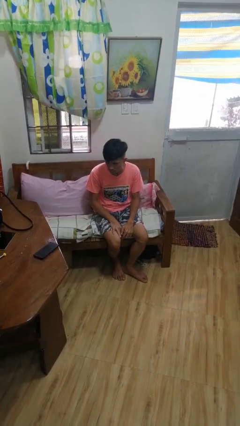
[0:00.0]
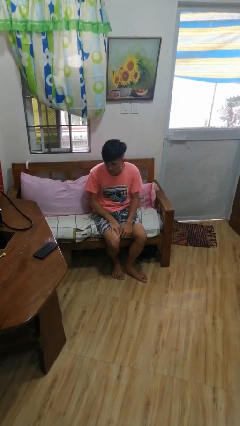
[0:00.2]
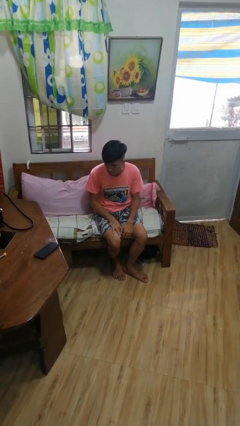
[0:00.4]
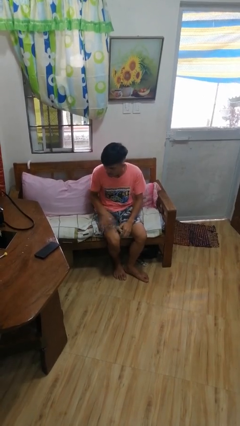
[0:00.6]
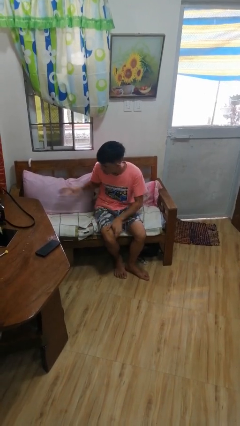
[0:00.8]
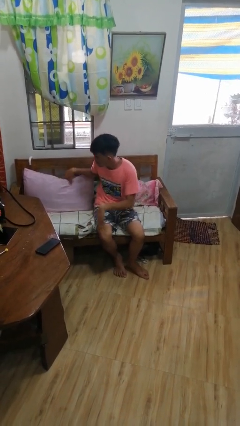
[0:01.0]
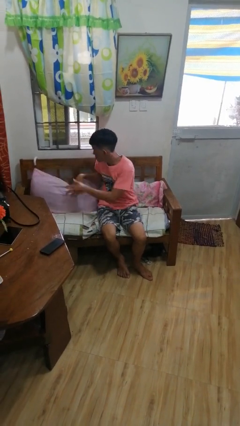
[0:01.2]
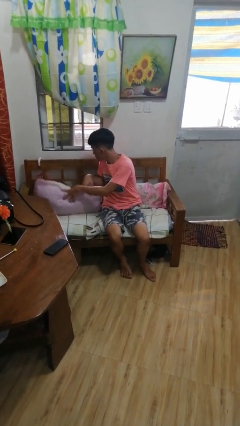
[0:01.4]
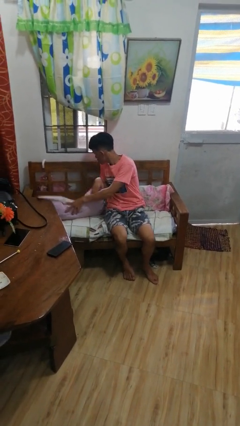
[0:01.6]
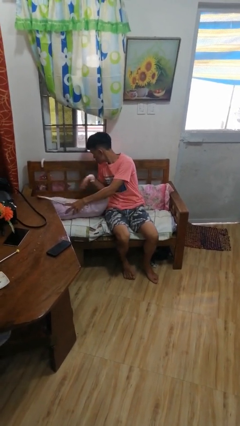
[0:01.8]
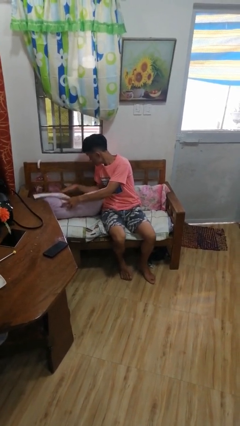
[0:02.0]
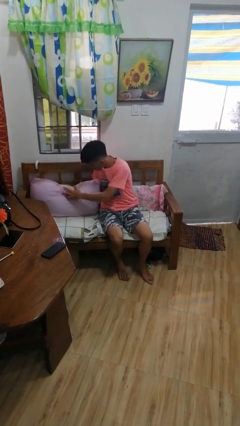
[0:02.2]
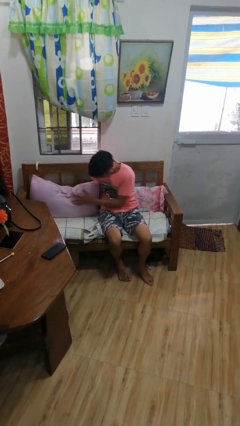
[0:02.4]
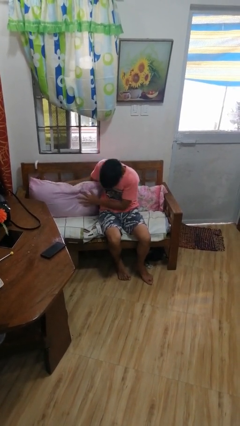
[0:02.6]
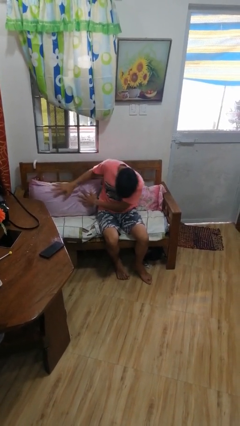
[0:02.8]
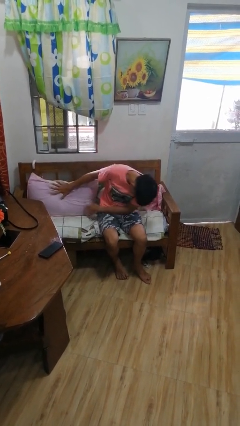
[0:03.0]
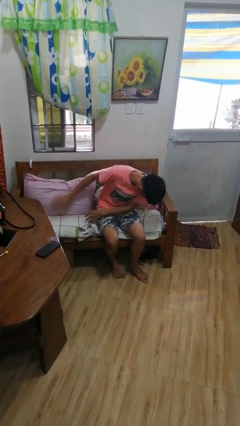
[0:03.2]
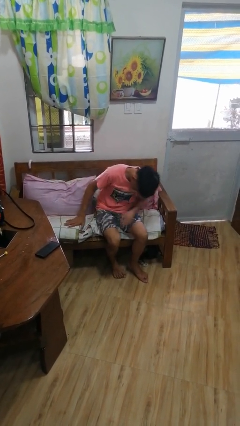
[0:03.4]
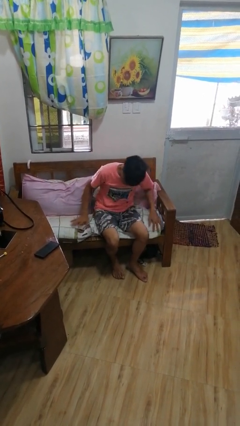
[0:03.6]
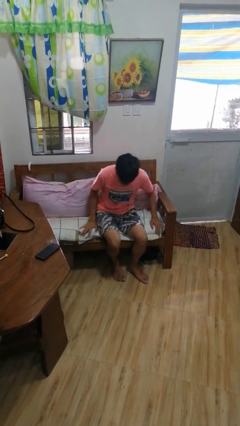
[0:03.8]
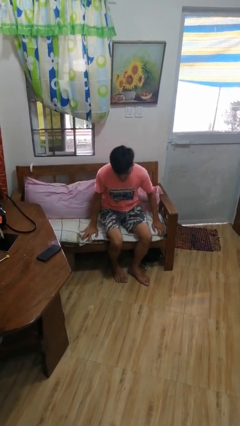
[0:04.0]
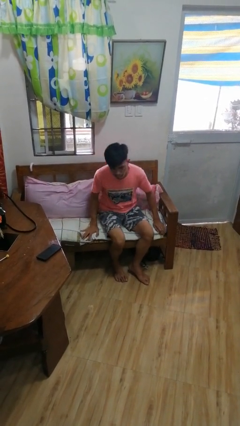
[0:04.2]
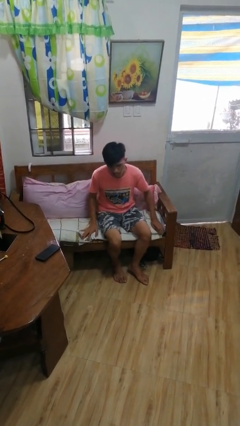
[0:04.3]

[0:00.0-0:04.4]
person searches in couch

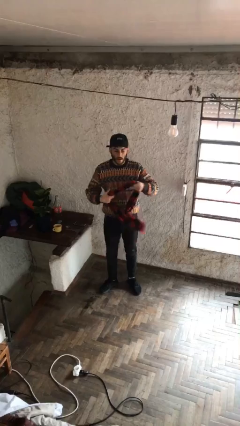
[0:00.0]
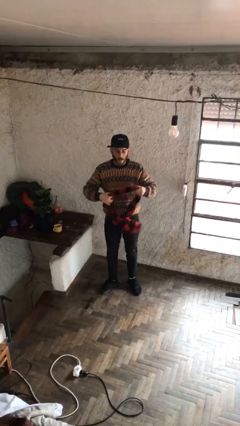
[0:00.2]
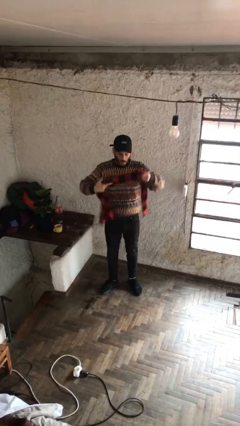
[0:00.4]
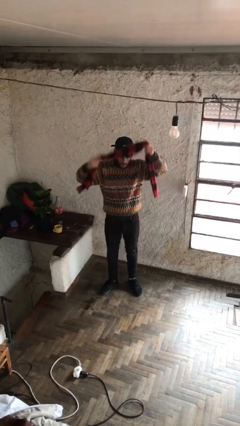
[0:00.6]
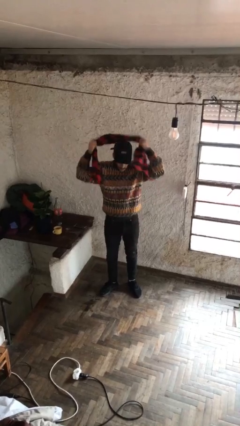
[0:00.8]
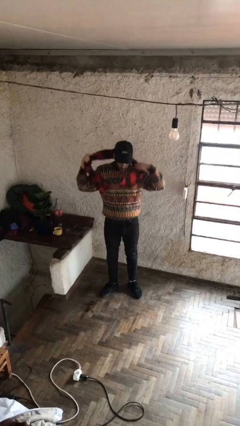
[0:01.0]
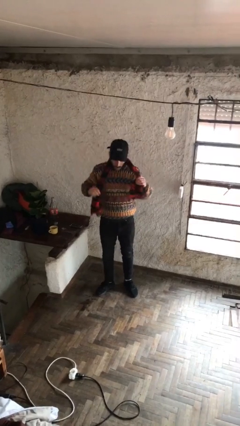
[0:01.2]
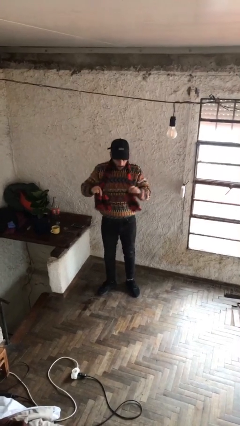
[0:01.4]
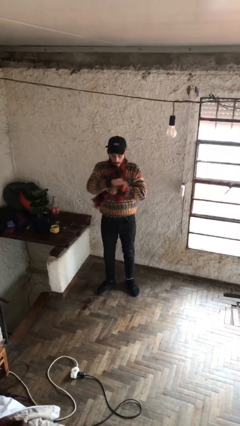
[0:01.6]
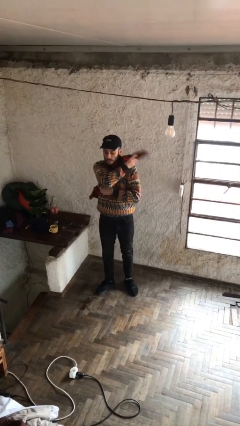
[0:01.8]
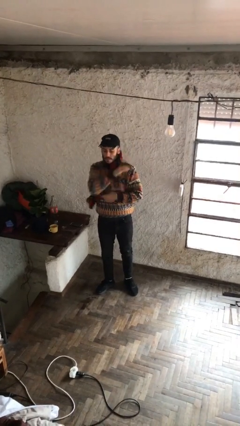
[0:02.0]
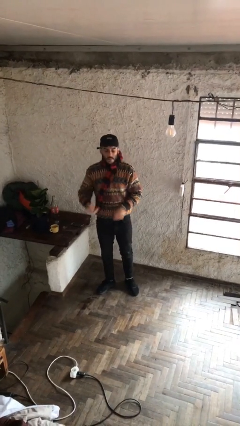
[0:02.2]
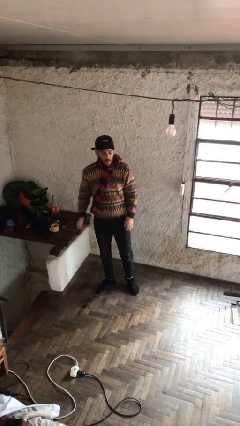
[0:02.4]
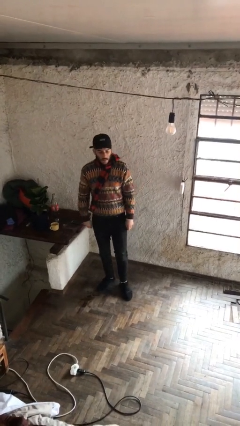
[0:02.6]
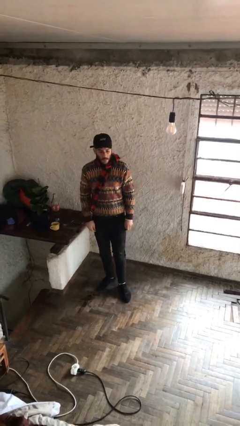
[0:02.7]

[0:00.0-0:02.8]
person puts on scarf

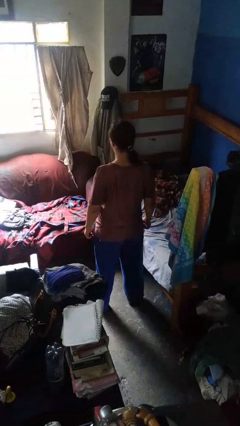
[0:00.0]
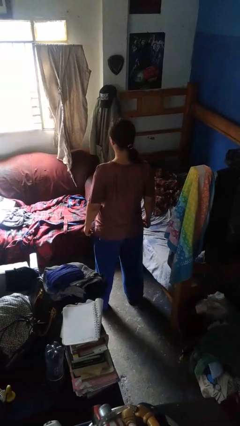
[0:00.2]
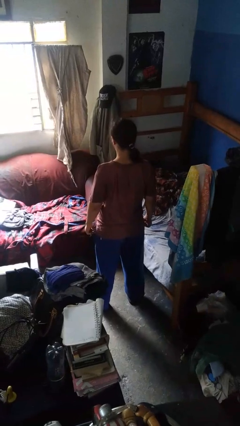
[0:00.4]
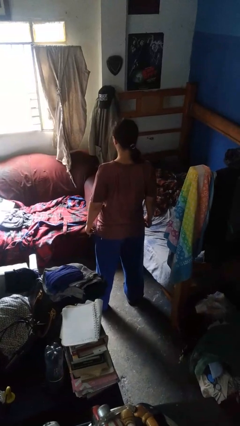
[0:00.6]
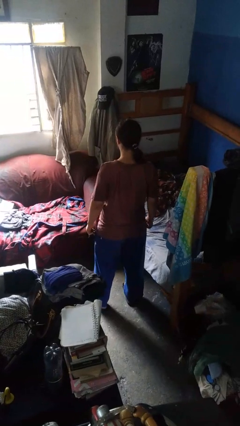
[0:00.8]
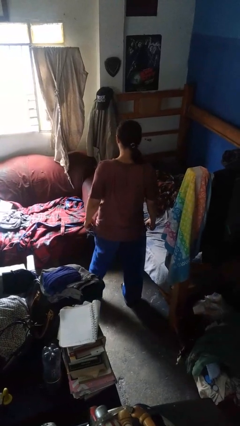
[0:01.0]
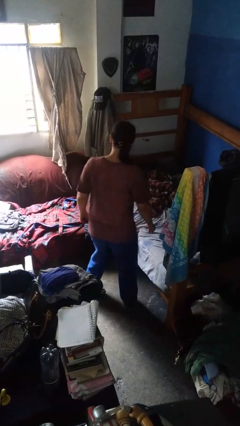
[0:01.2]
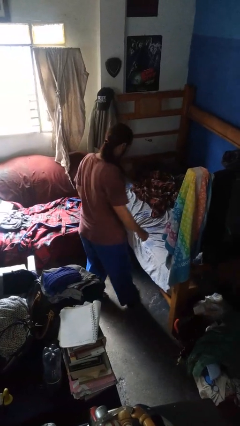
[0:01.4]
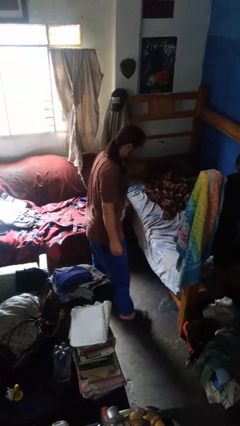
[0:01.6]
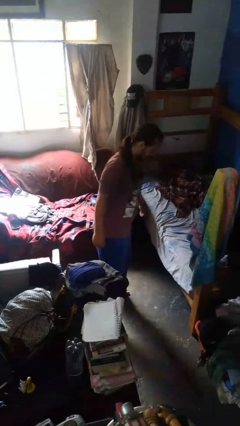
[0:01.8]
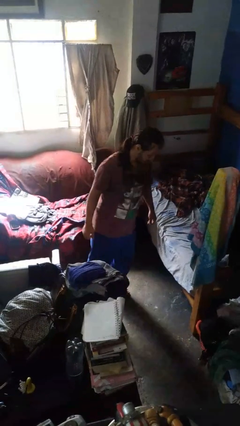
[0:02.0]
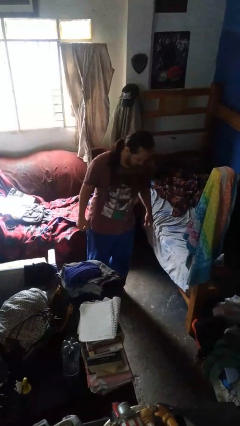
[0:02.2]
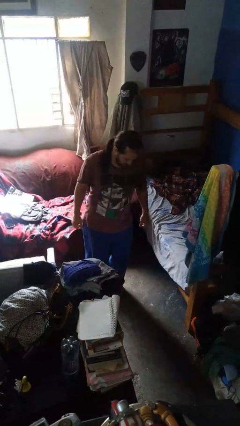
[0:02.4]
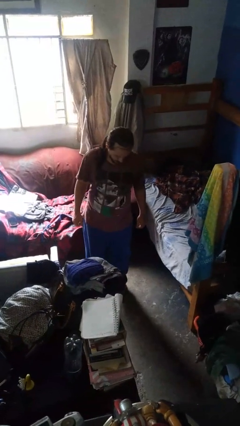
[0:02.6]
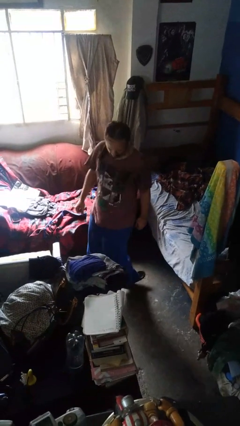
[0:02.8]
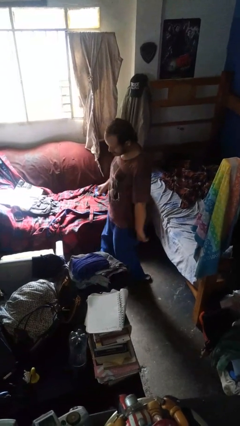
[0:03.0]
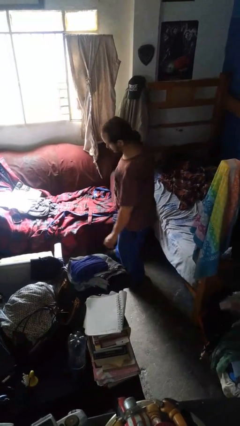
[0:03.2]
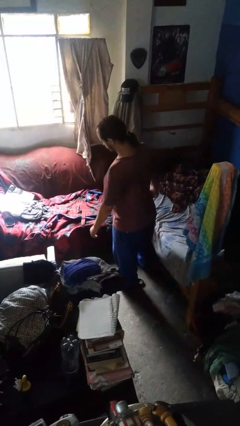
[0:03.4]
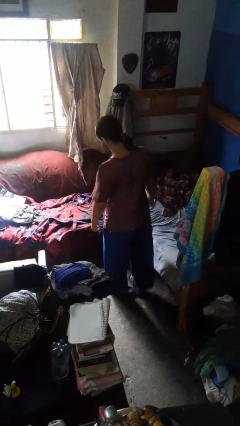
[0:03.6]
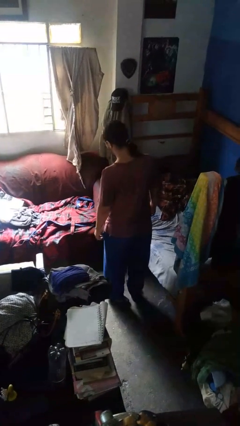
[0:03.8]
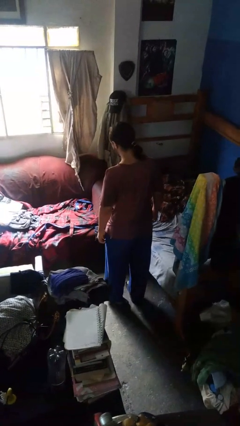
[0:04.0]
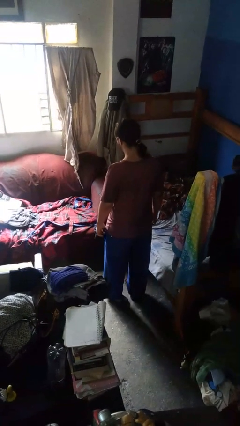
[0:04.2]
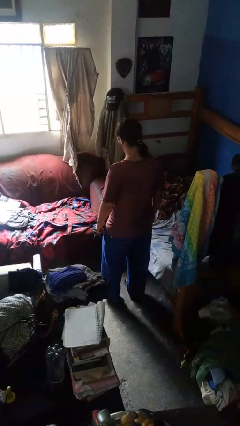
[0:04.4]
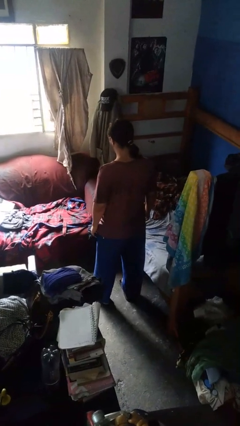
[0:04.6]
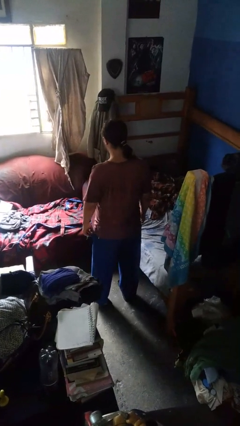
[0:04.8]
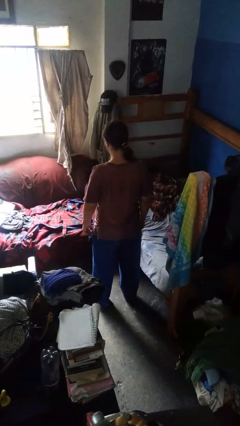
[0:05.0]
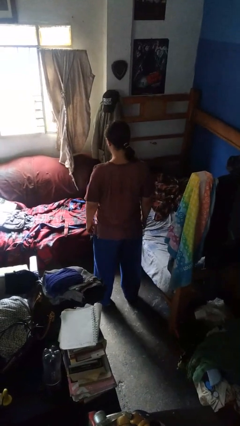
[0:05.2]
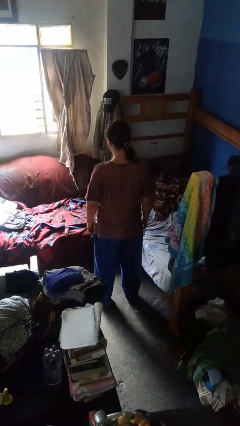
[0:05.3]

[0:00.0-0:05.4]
person twirls

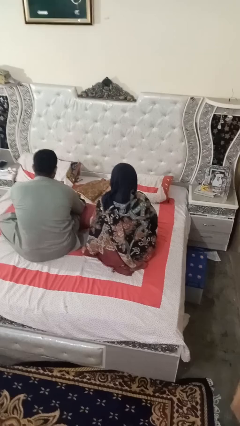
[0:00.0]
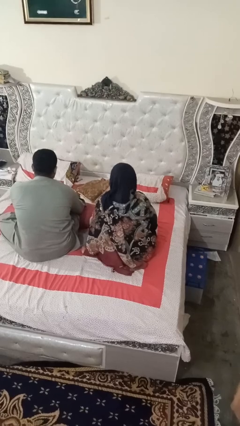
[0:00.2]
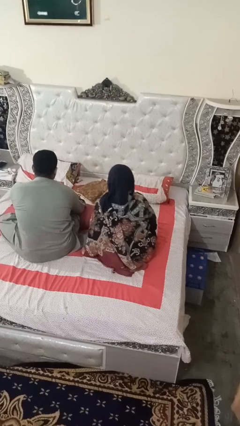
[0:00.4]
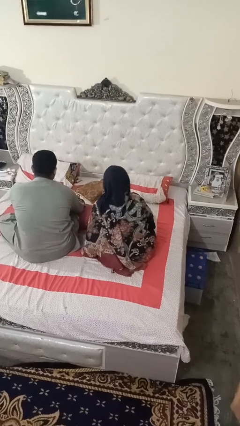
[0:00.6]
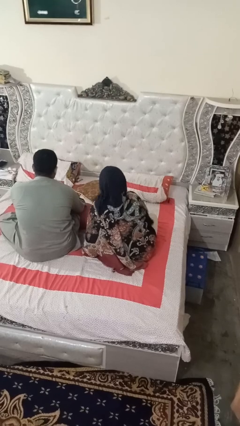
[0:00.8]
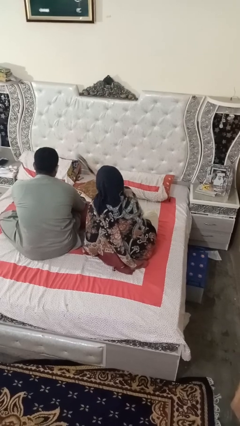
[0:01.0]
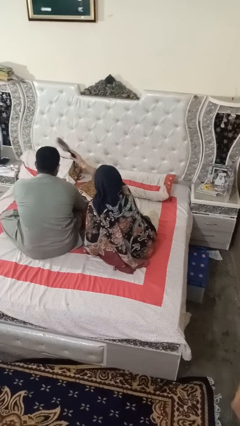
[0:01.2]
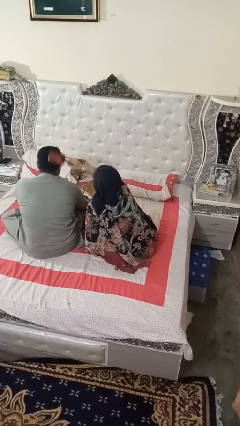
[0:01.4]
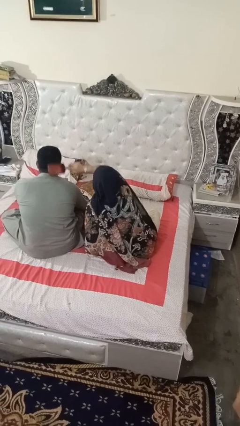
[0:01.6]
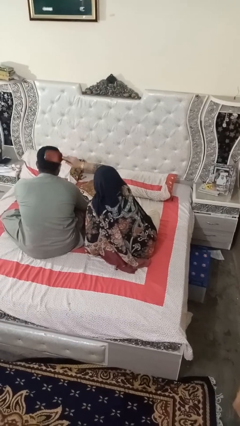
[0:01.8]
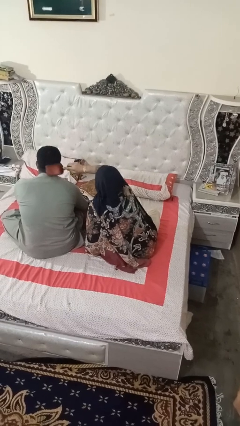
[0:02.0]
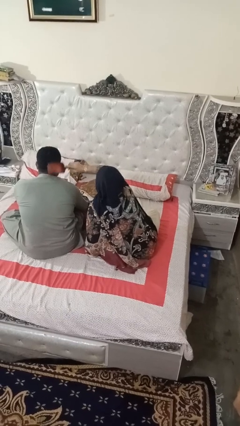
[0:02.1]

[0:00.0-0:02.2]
person brushes hair of person

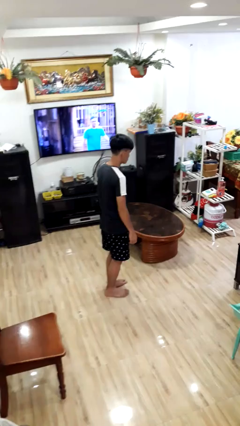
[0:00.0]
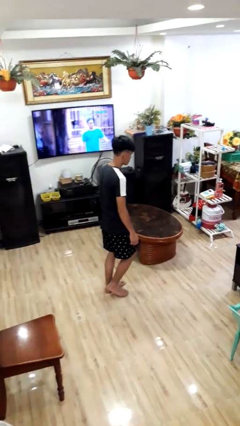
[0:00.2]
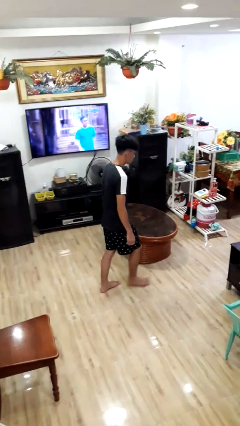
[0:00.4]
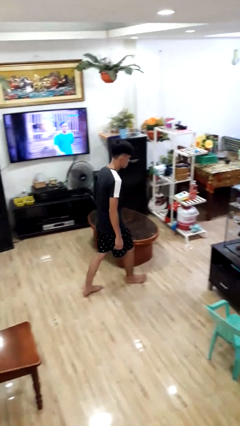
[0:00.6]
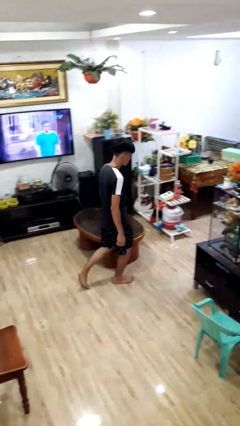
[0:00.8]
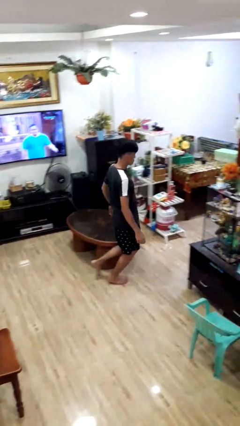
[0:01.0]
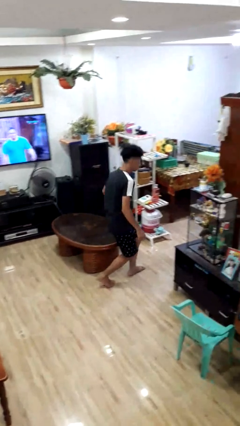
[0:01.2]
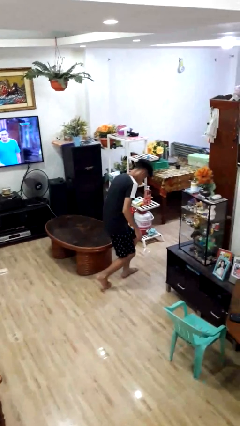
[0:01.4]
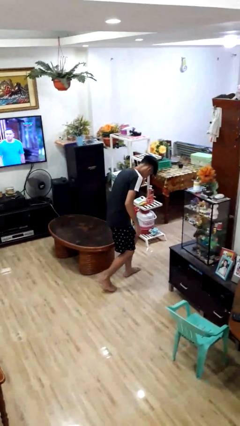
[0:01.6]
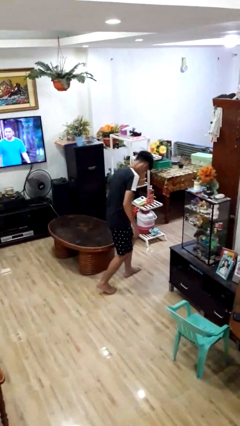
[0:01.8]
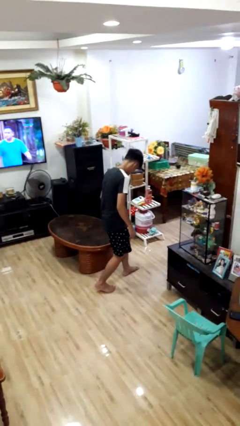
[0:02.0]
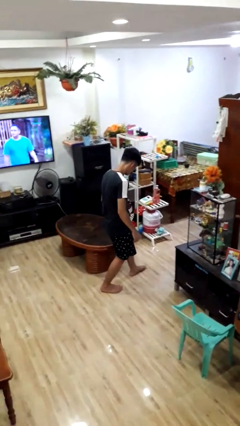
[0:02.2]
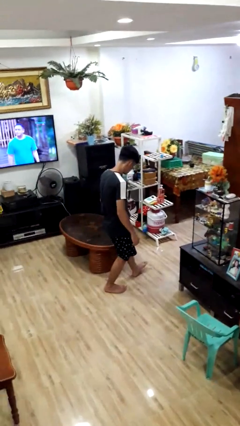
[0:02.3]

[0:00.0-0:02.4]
person bumps into table
